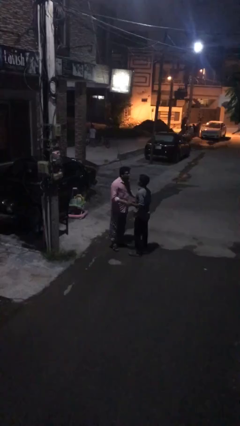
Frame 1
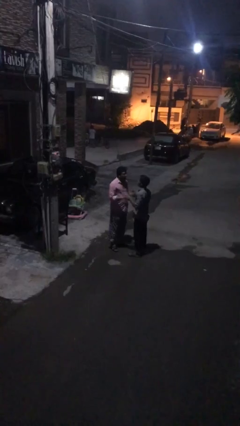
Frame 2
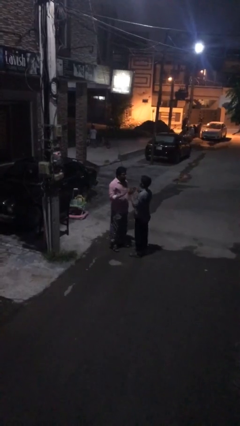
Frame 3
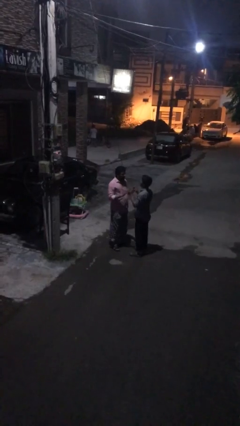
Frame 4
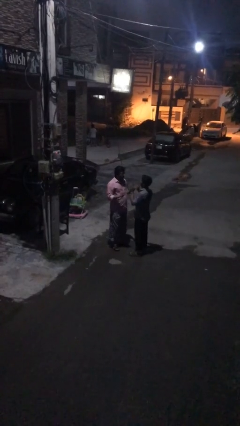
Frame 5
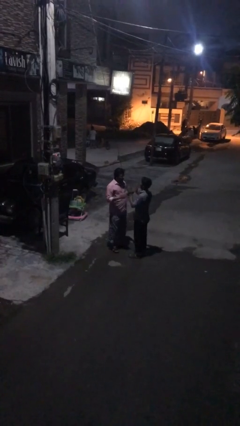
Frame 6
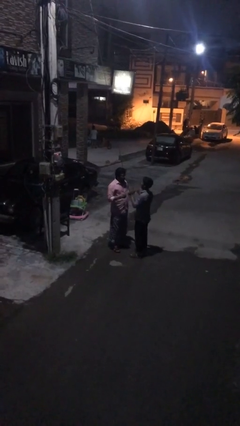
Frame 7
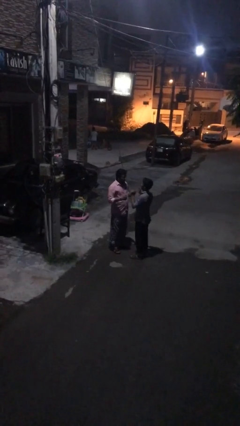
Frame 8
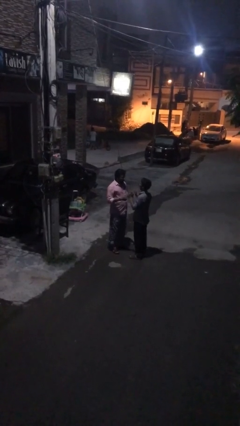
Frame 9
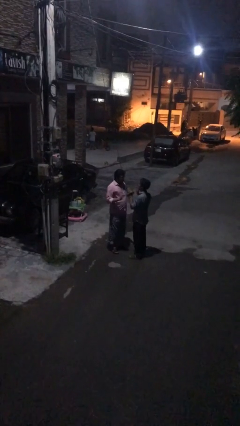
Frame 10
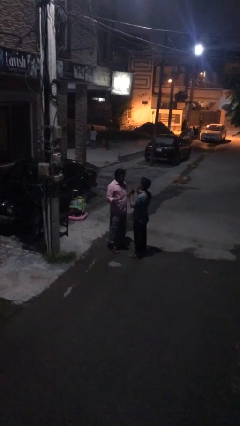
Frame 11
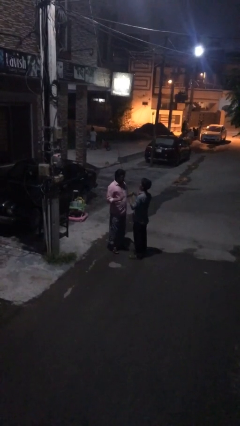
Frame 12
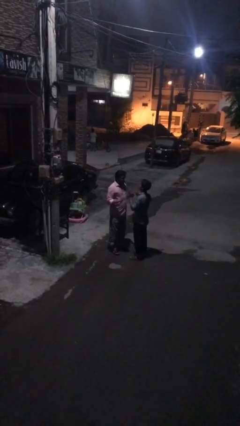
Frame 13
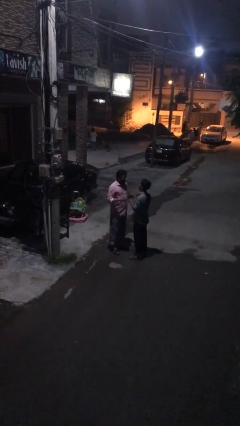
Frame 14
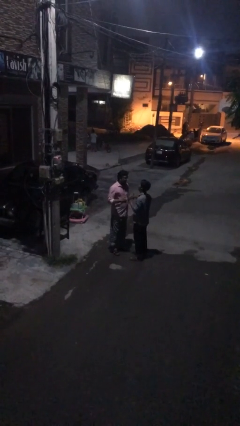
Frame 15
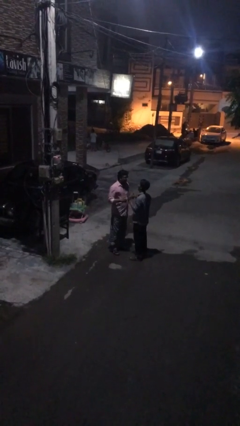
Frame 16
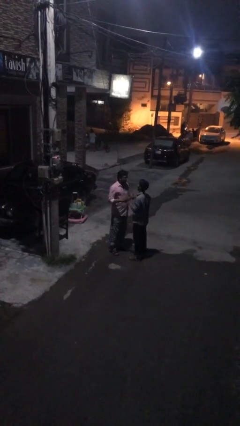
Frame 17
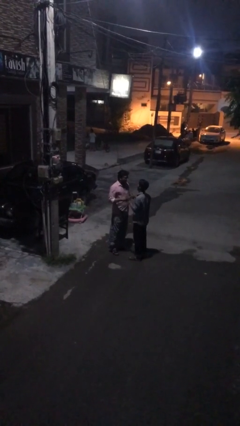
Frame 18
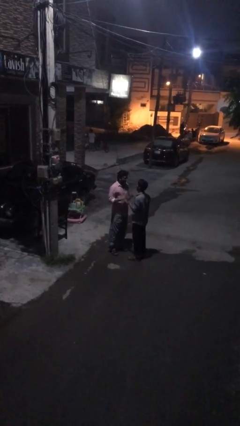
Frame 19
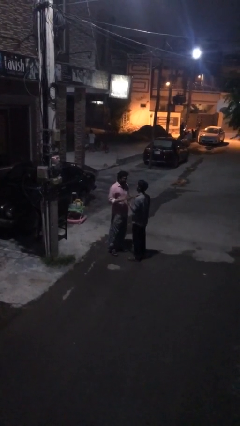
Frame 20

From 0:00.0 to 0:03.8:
person talks to person

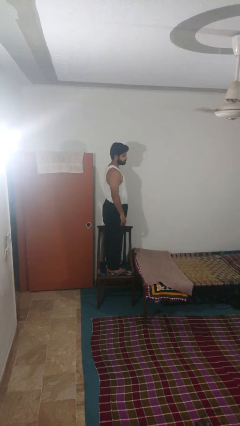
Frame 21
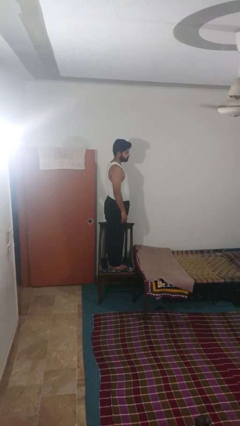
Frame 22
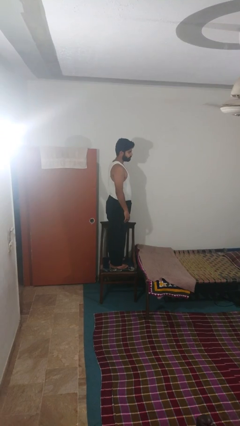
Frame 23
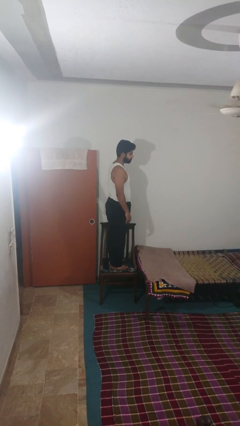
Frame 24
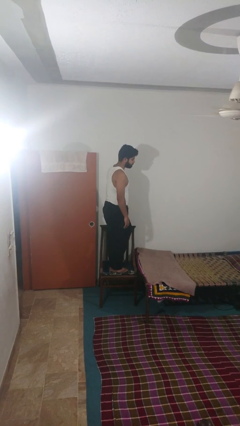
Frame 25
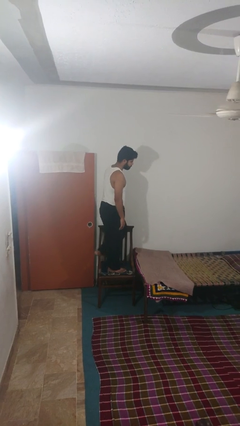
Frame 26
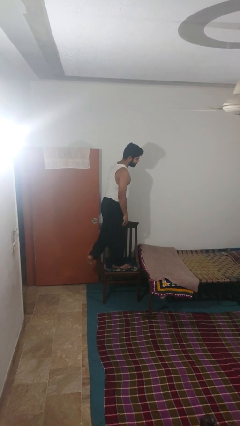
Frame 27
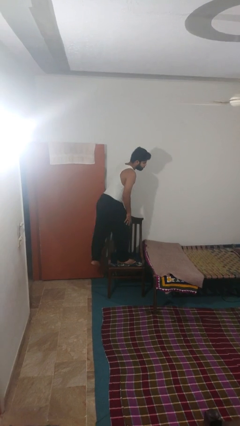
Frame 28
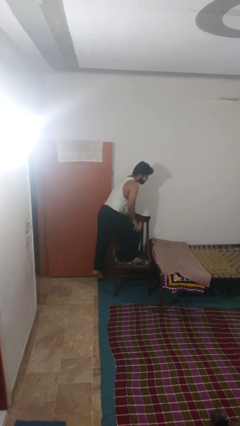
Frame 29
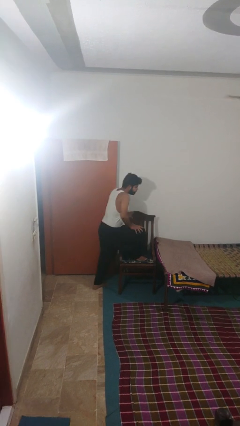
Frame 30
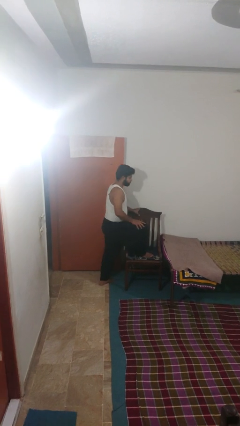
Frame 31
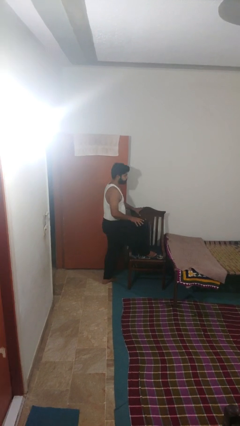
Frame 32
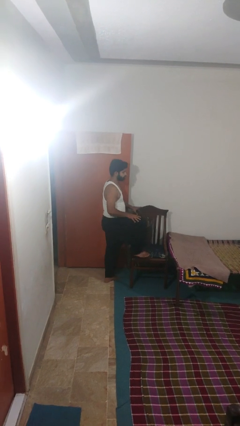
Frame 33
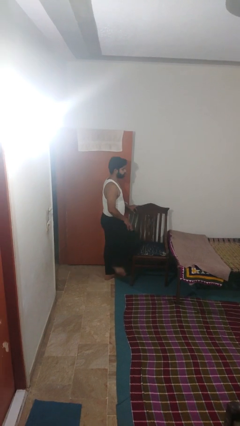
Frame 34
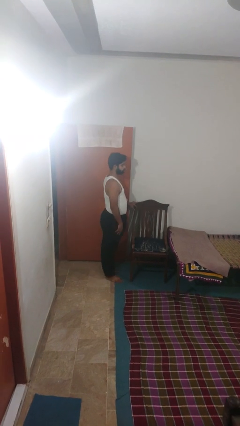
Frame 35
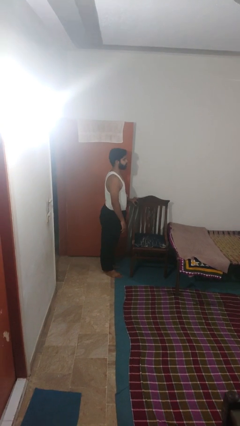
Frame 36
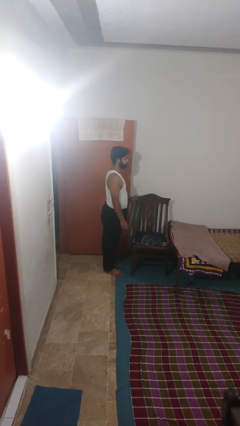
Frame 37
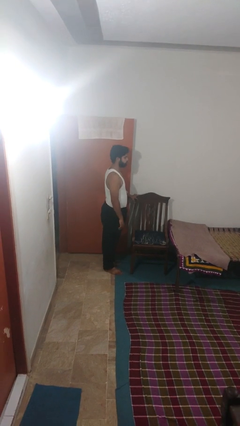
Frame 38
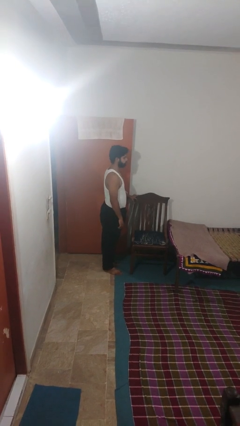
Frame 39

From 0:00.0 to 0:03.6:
person climbs off chair

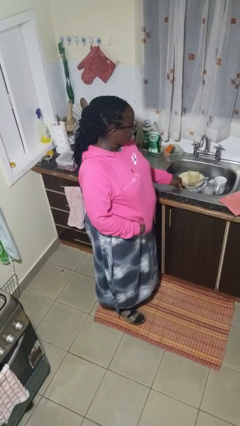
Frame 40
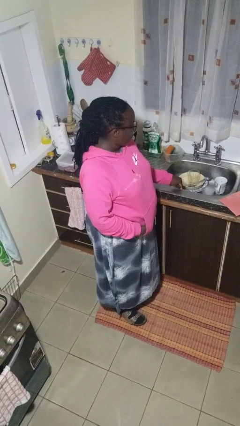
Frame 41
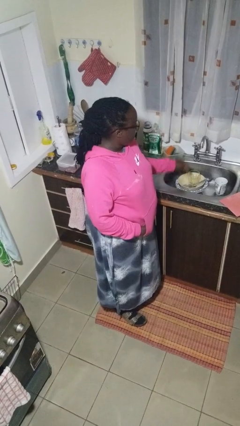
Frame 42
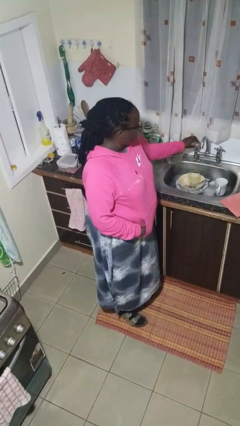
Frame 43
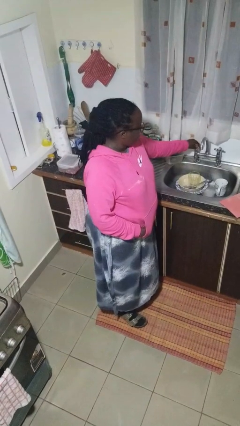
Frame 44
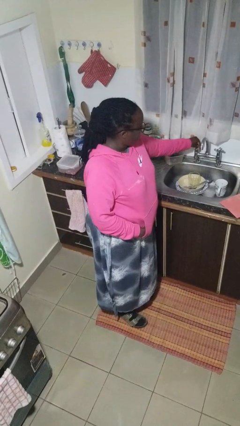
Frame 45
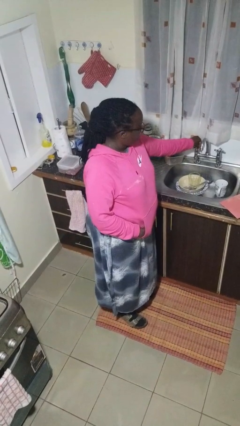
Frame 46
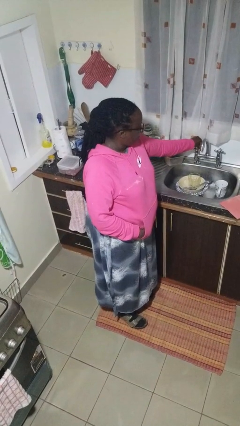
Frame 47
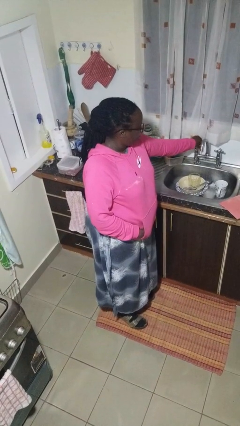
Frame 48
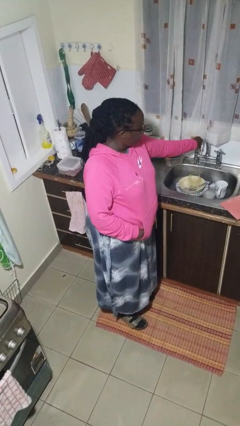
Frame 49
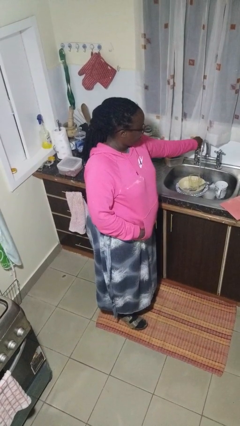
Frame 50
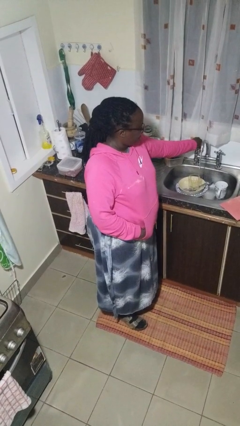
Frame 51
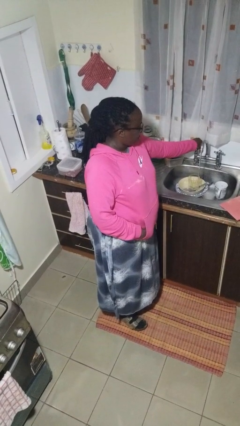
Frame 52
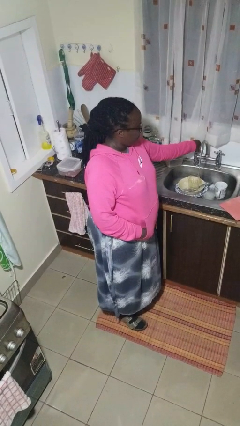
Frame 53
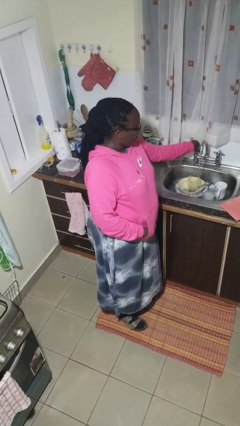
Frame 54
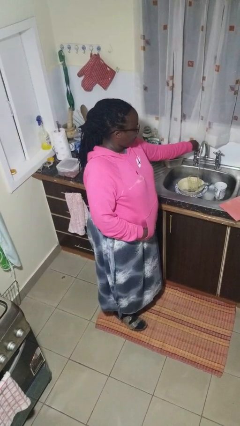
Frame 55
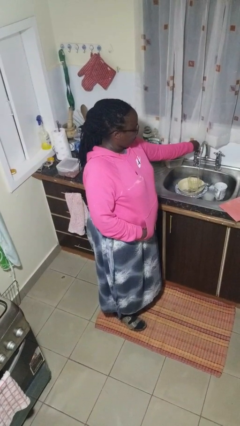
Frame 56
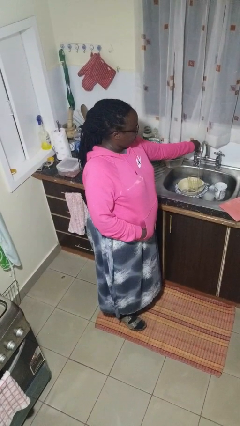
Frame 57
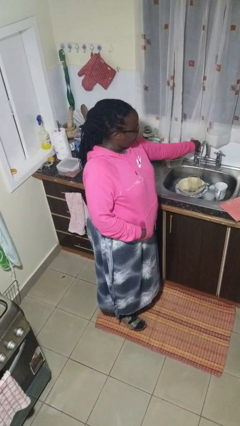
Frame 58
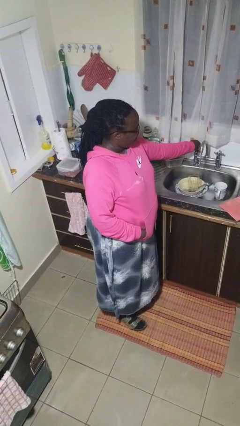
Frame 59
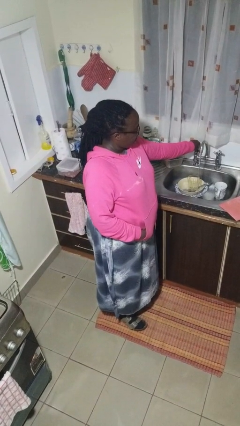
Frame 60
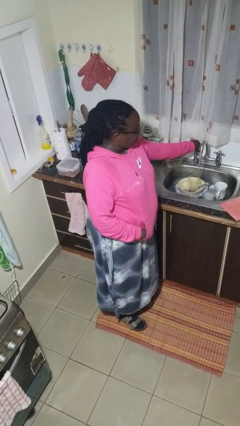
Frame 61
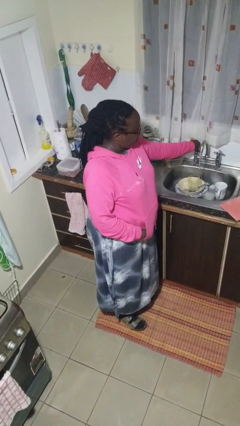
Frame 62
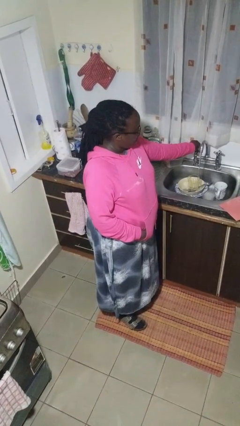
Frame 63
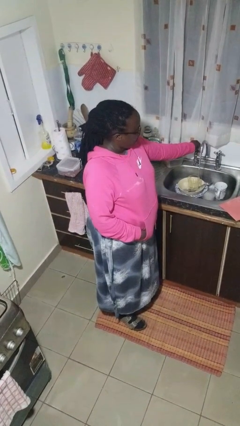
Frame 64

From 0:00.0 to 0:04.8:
person turns on faucet

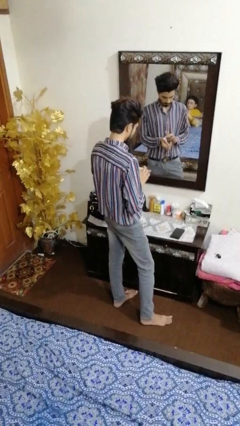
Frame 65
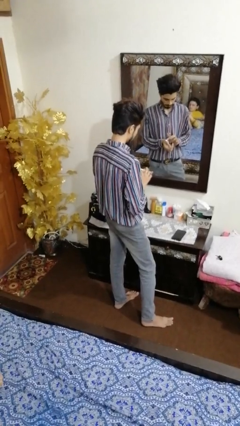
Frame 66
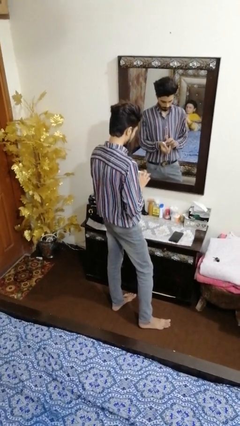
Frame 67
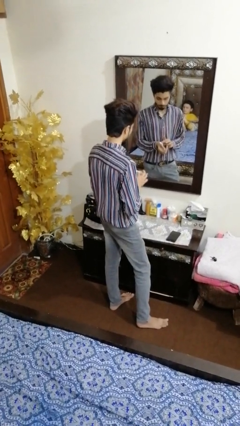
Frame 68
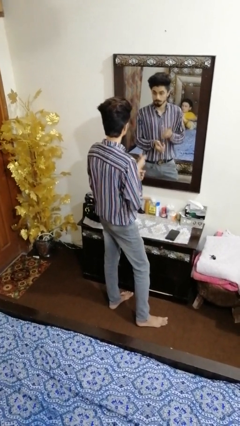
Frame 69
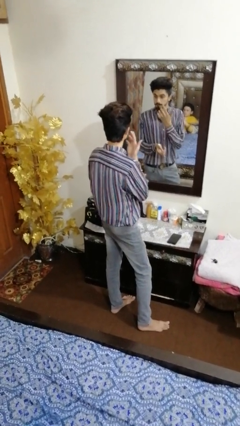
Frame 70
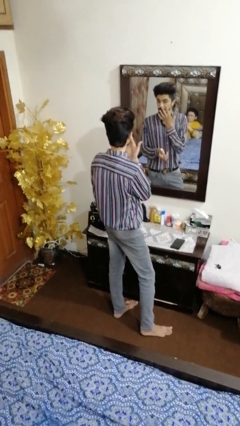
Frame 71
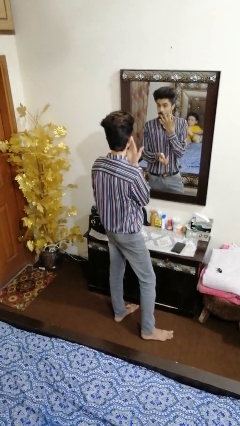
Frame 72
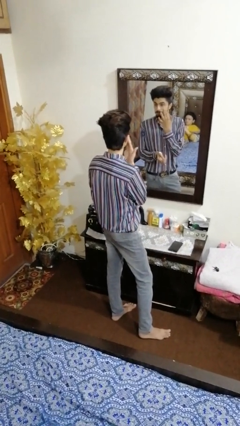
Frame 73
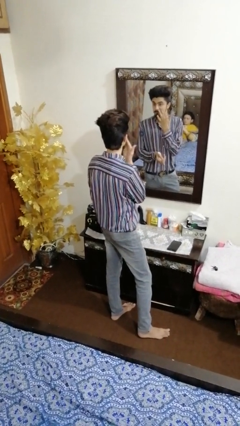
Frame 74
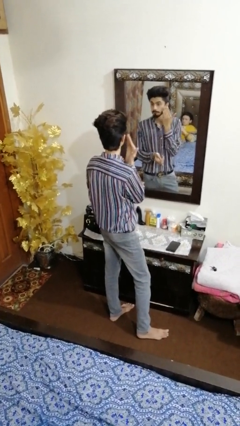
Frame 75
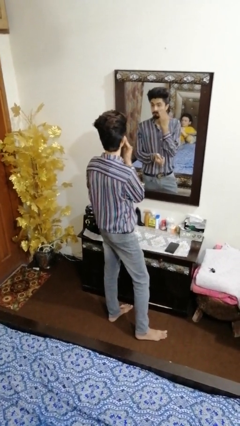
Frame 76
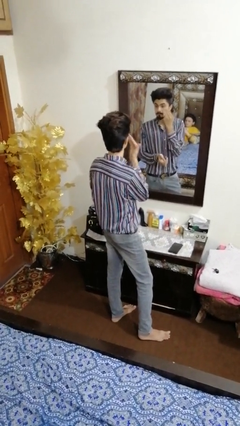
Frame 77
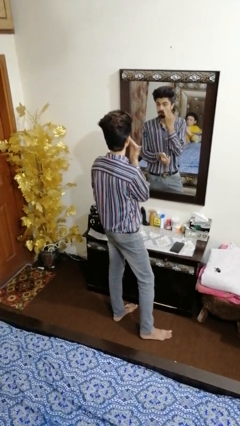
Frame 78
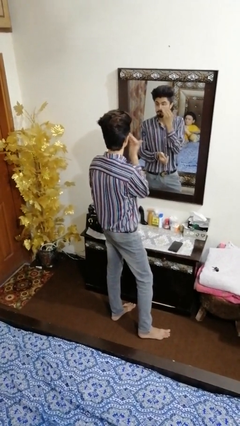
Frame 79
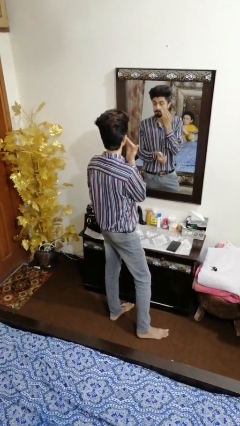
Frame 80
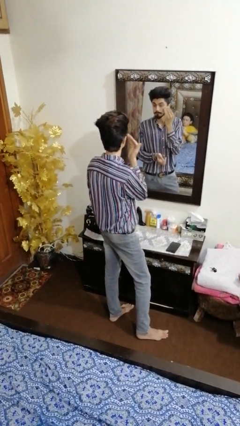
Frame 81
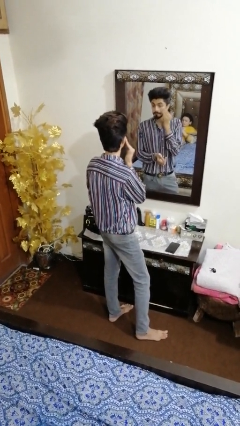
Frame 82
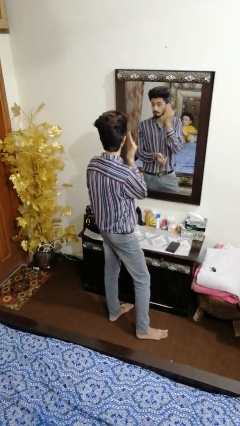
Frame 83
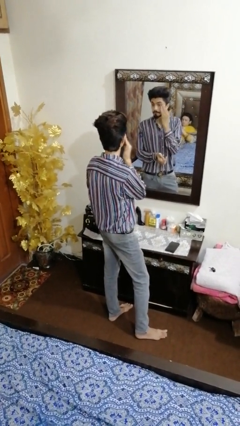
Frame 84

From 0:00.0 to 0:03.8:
person applies foundation makeup

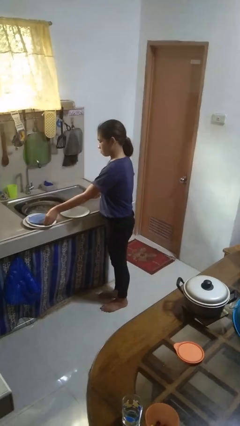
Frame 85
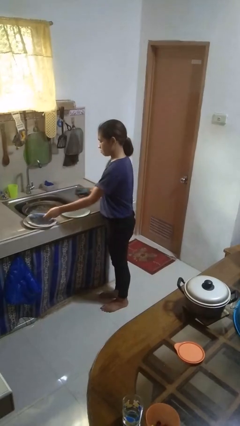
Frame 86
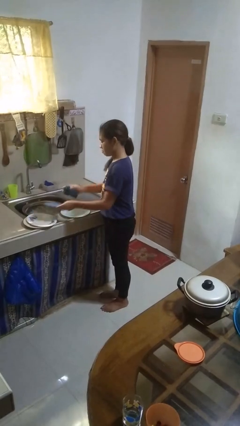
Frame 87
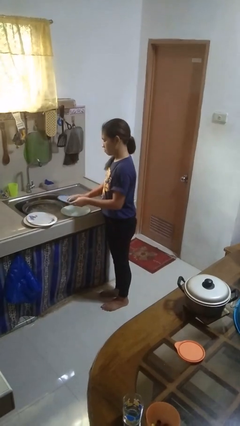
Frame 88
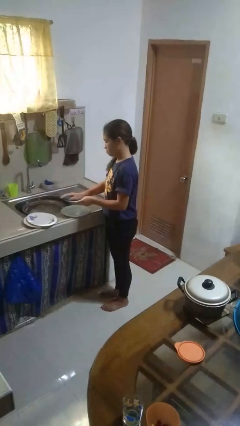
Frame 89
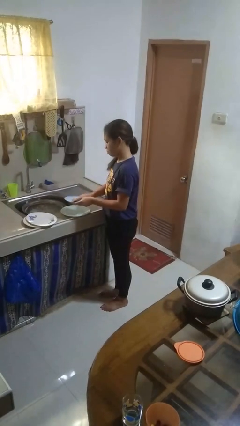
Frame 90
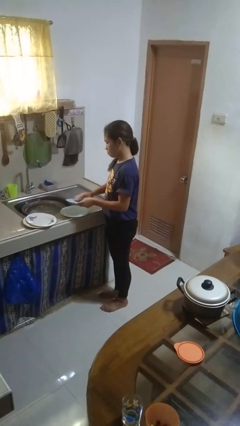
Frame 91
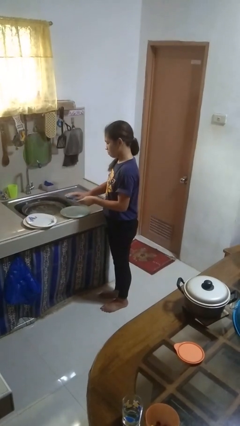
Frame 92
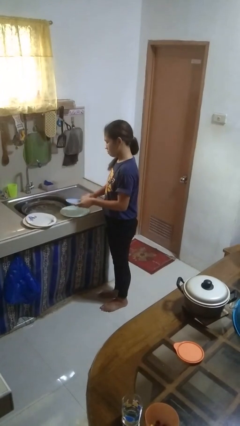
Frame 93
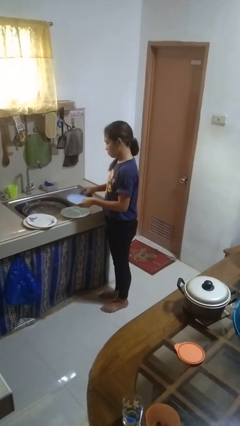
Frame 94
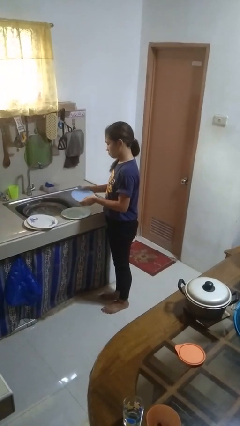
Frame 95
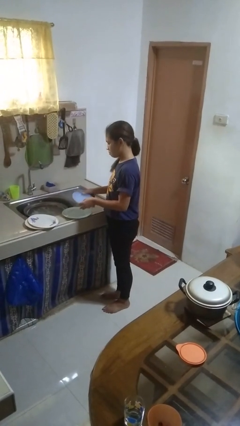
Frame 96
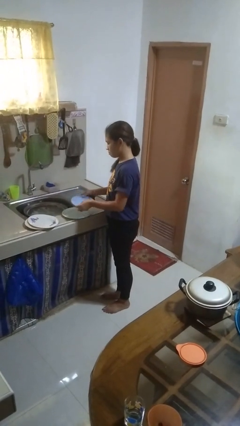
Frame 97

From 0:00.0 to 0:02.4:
person dries dish
